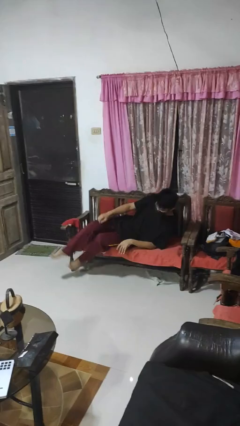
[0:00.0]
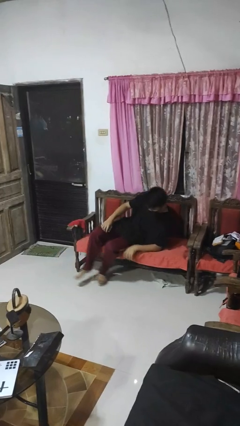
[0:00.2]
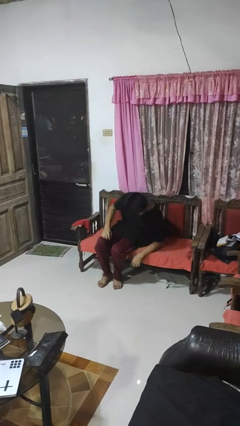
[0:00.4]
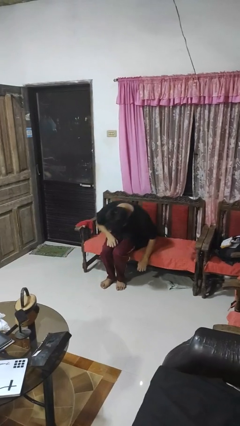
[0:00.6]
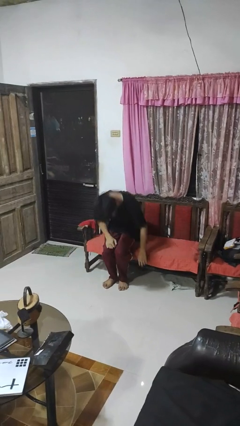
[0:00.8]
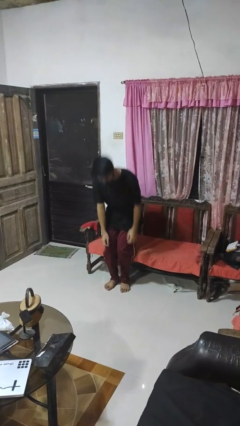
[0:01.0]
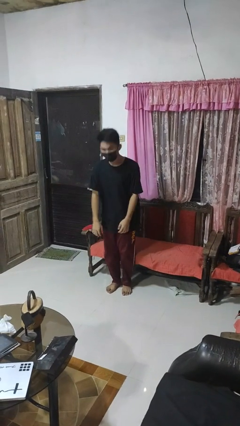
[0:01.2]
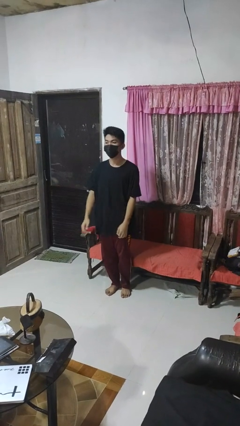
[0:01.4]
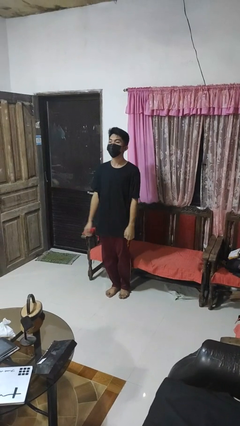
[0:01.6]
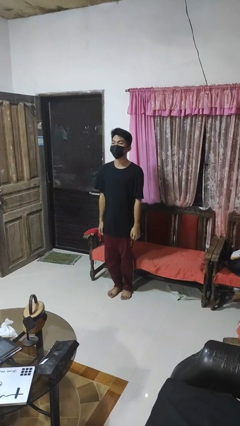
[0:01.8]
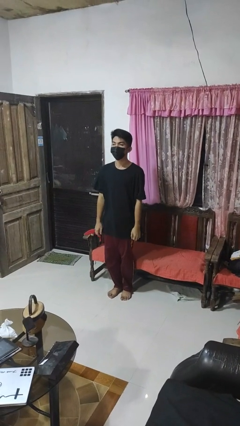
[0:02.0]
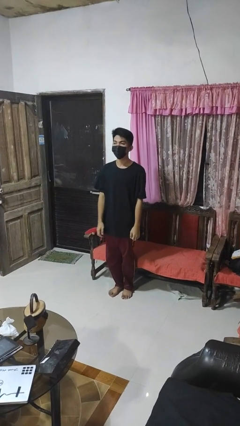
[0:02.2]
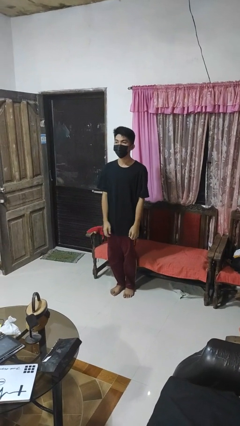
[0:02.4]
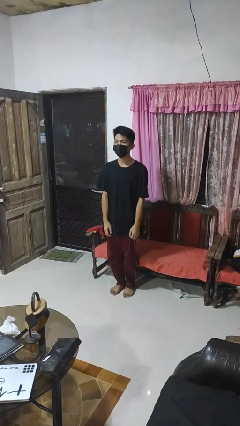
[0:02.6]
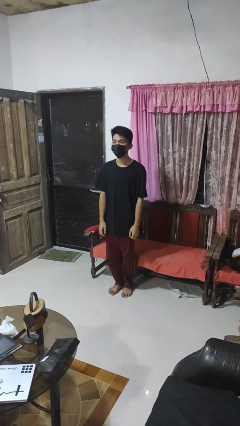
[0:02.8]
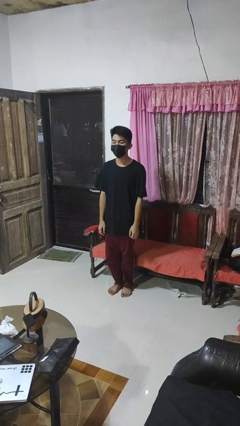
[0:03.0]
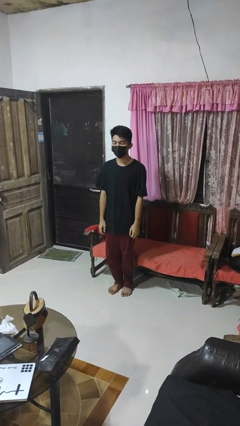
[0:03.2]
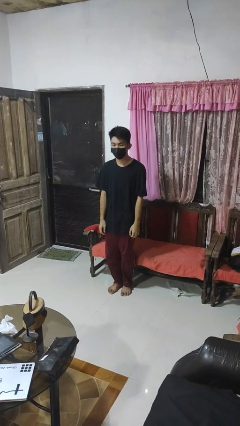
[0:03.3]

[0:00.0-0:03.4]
person stands up

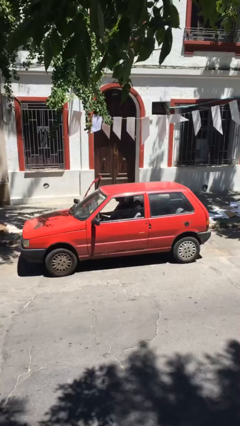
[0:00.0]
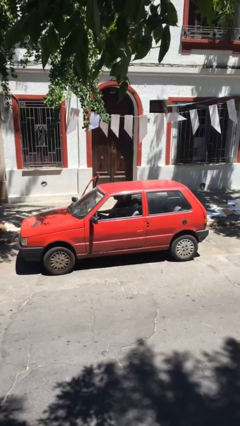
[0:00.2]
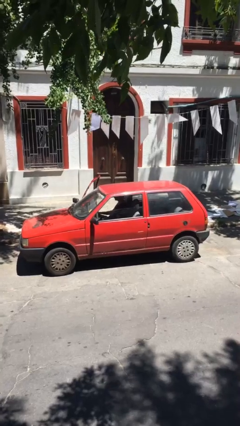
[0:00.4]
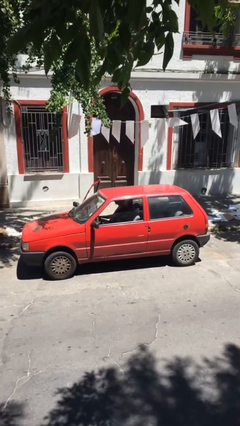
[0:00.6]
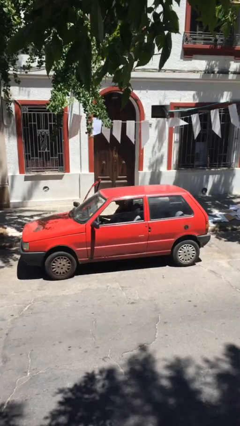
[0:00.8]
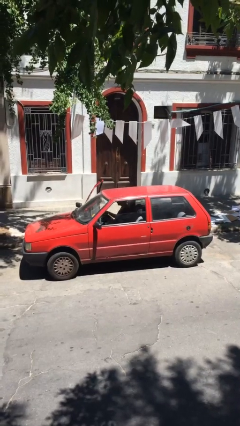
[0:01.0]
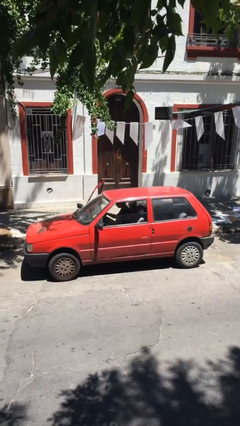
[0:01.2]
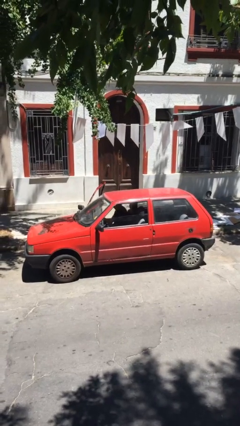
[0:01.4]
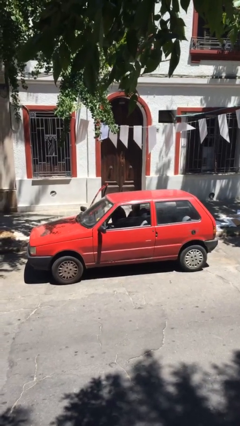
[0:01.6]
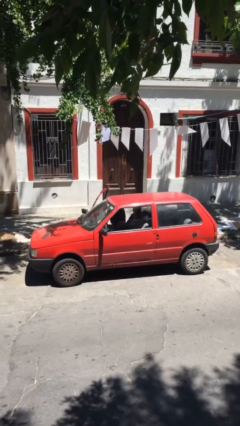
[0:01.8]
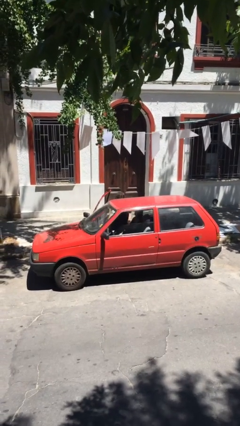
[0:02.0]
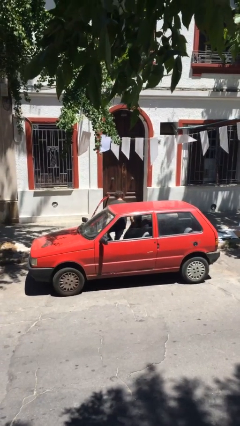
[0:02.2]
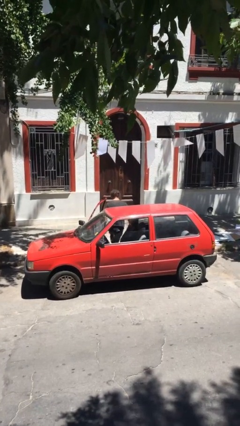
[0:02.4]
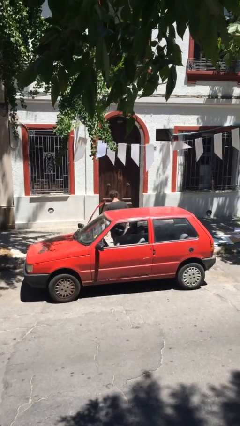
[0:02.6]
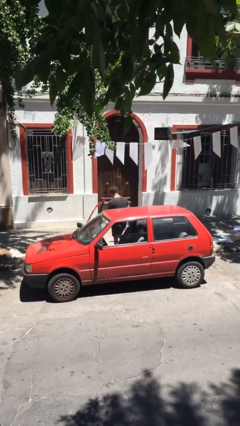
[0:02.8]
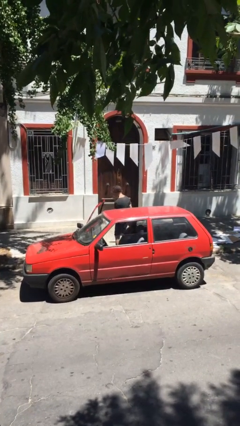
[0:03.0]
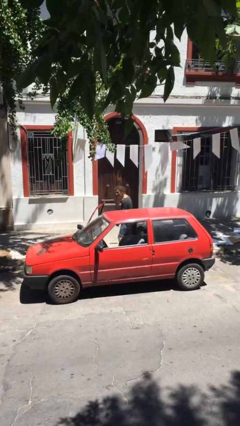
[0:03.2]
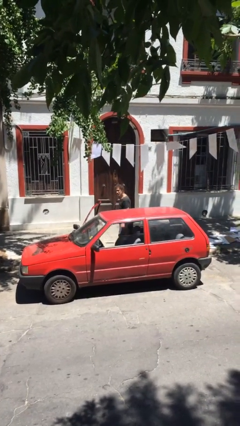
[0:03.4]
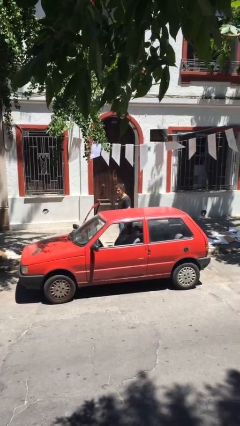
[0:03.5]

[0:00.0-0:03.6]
person exits car

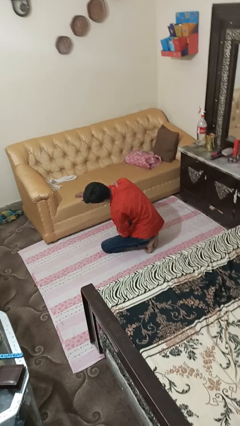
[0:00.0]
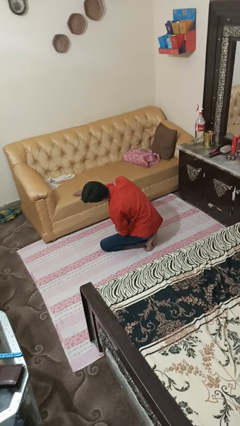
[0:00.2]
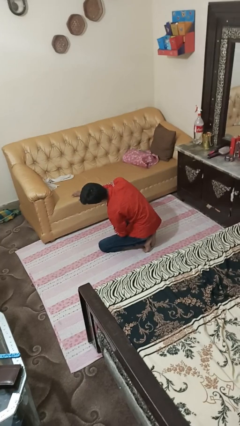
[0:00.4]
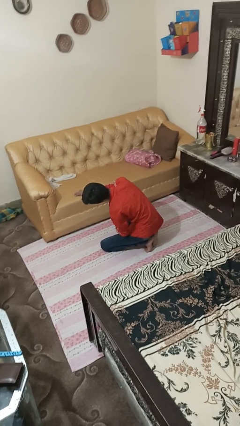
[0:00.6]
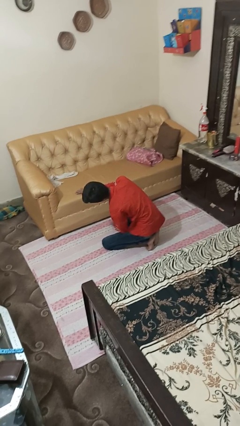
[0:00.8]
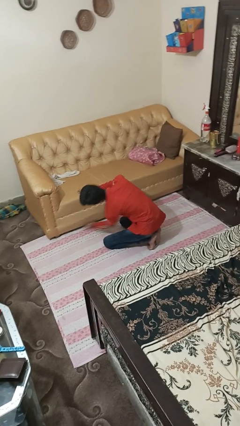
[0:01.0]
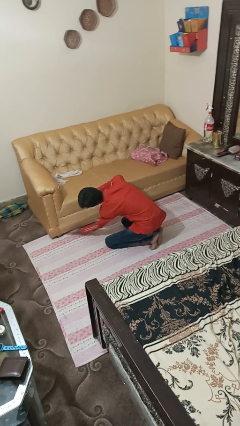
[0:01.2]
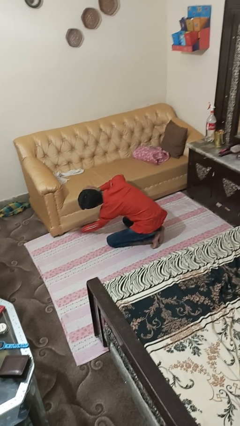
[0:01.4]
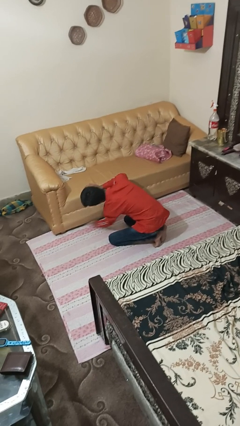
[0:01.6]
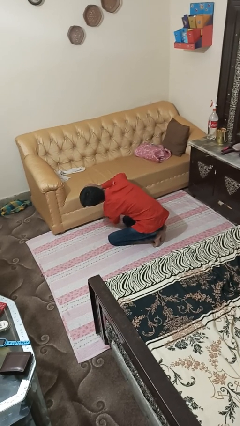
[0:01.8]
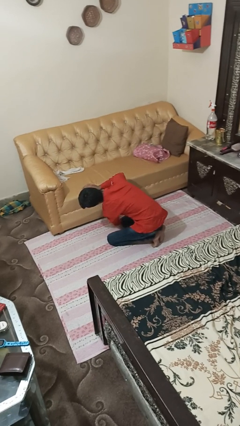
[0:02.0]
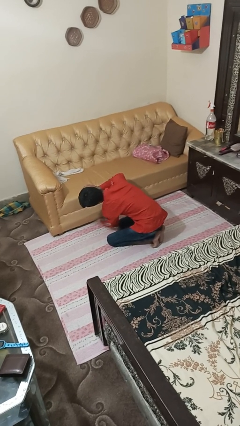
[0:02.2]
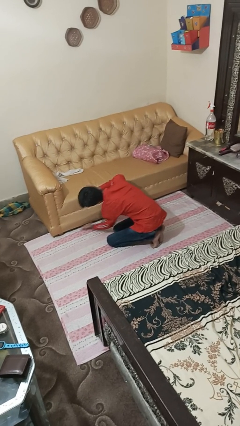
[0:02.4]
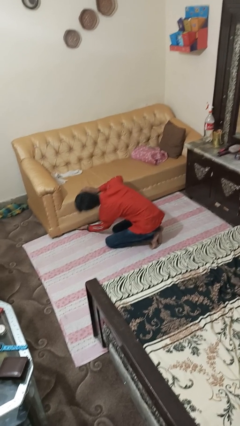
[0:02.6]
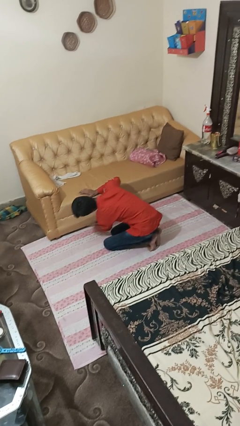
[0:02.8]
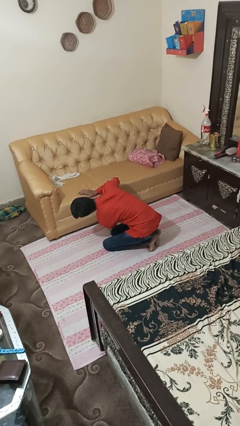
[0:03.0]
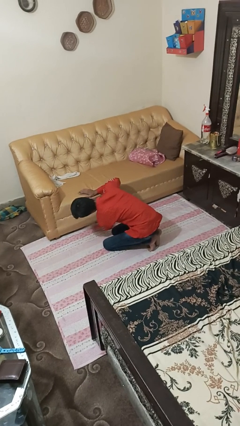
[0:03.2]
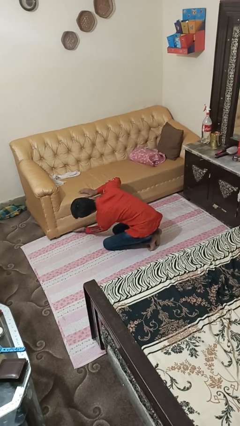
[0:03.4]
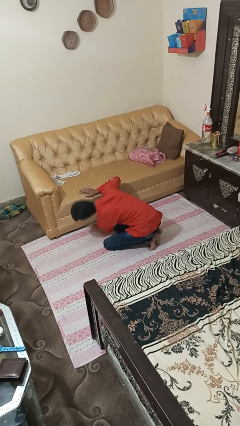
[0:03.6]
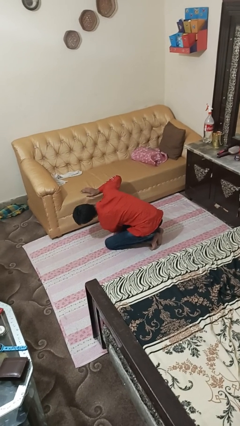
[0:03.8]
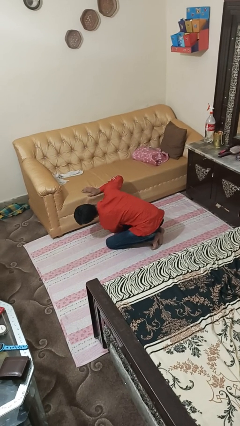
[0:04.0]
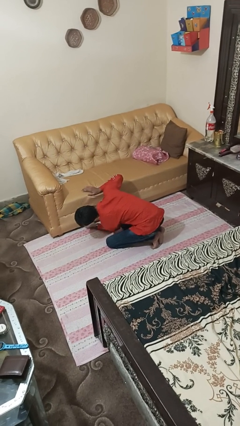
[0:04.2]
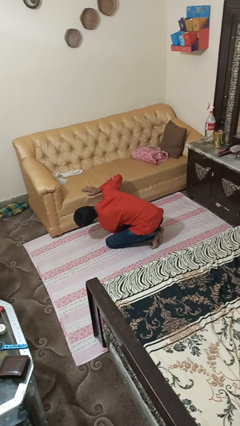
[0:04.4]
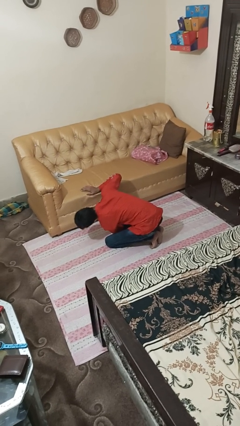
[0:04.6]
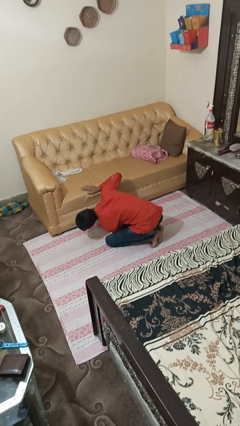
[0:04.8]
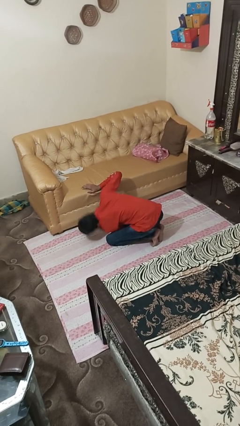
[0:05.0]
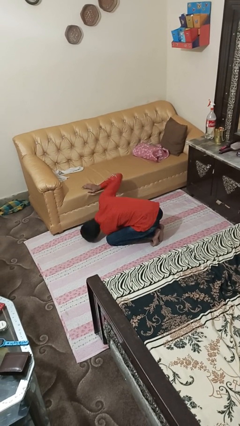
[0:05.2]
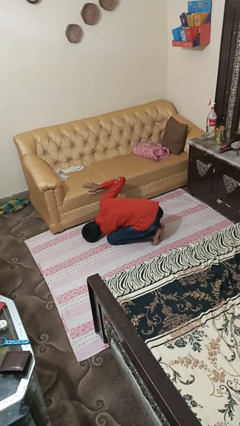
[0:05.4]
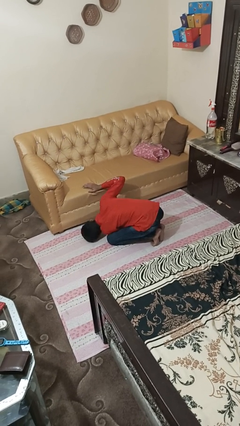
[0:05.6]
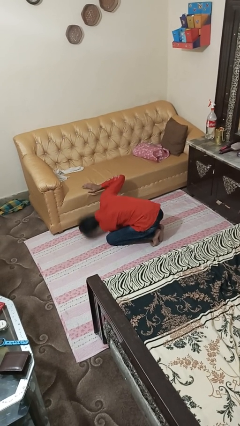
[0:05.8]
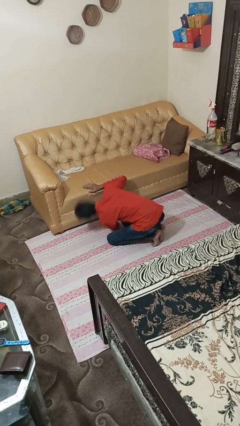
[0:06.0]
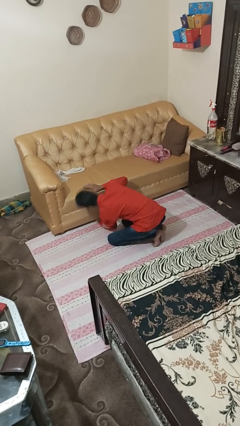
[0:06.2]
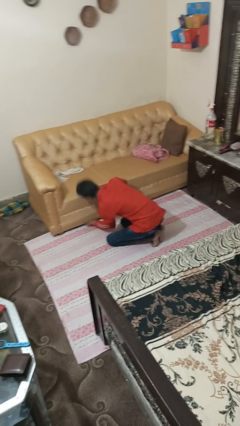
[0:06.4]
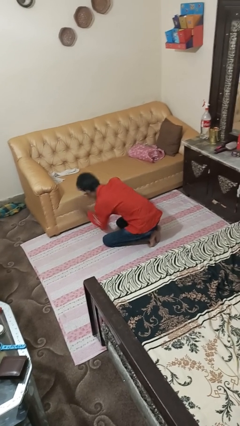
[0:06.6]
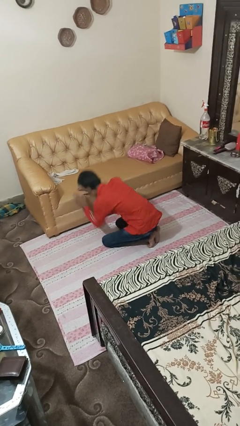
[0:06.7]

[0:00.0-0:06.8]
person searches under couch

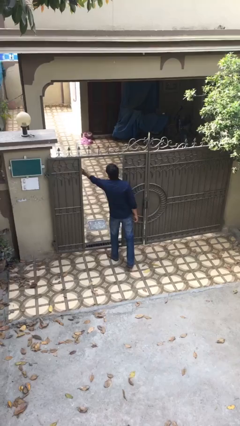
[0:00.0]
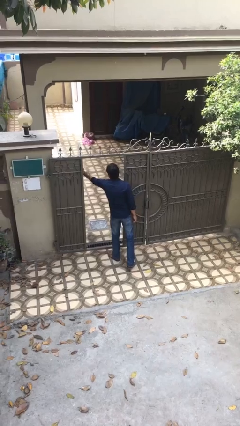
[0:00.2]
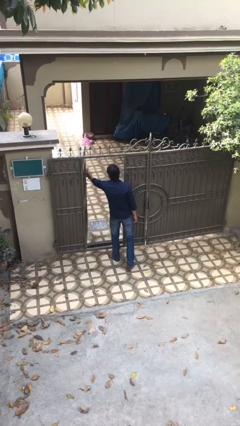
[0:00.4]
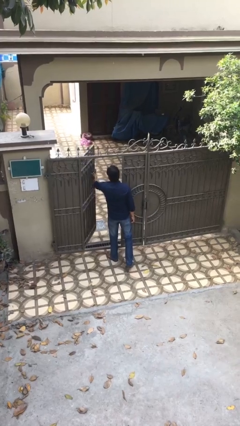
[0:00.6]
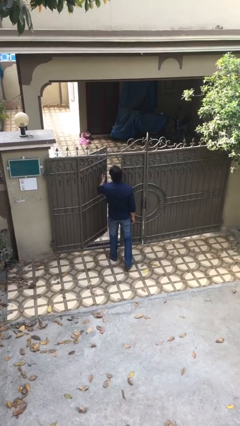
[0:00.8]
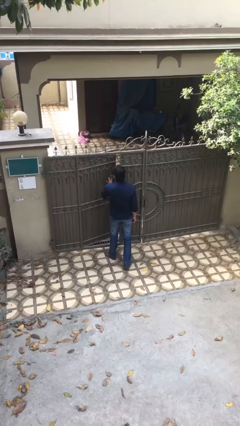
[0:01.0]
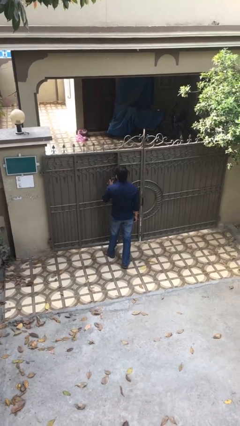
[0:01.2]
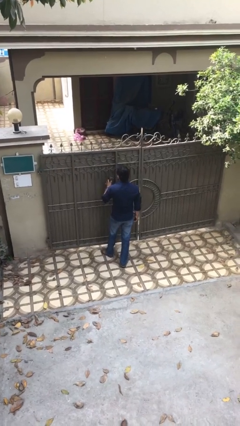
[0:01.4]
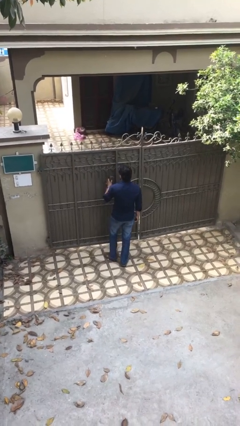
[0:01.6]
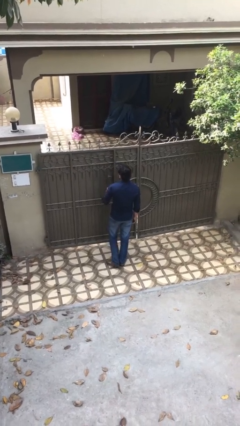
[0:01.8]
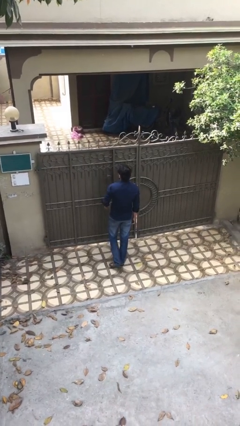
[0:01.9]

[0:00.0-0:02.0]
person closes facility door

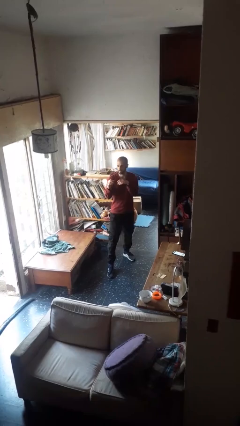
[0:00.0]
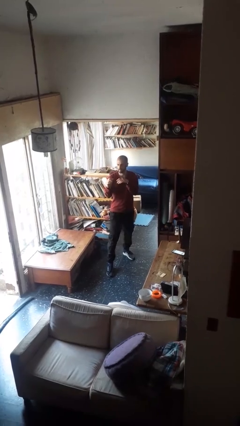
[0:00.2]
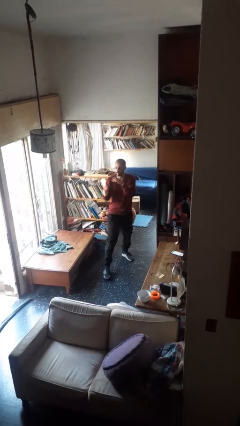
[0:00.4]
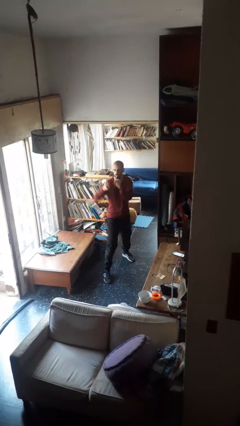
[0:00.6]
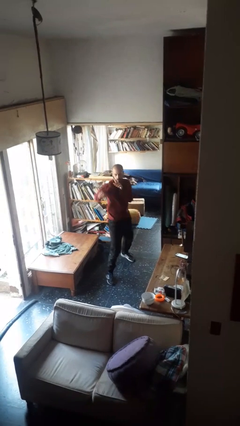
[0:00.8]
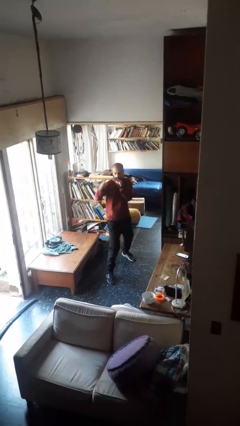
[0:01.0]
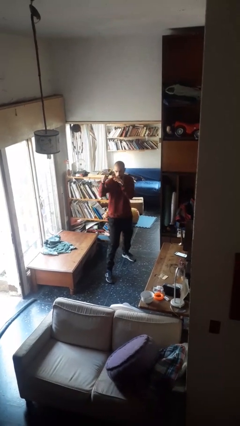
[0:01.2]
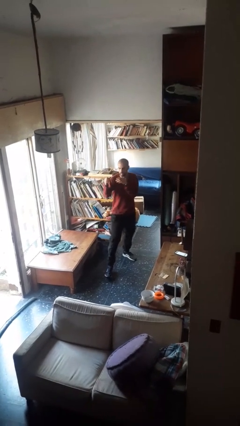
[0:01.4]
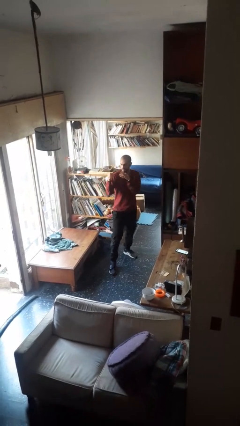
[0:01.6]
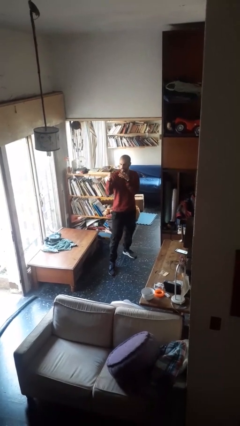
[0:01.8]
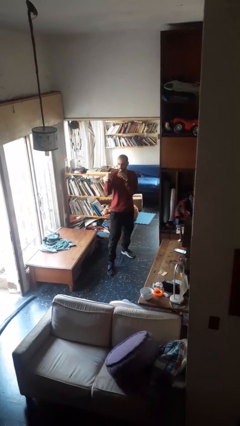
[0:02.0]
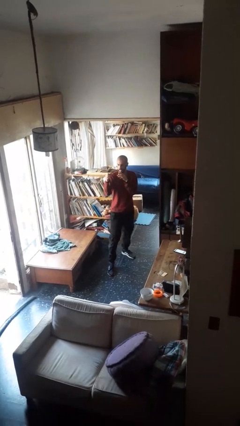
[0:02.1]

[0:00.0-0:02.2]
person karate chop
